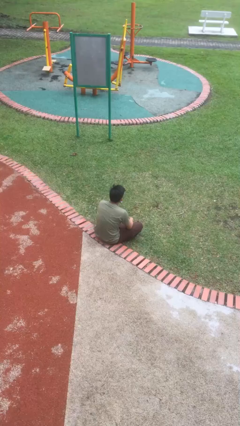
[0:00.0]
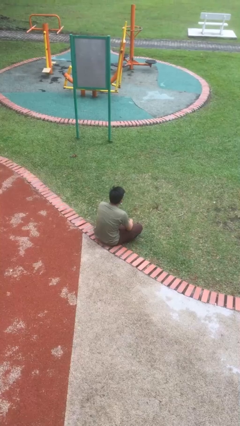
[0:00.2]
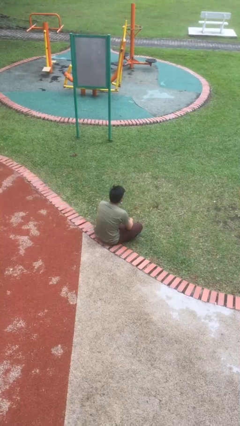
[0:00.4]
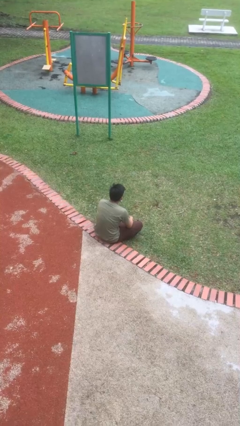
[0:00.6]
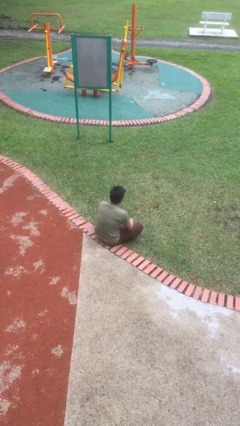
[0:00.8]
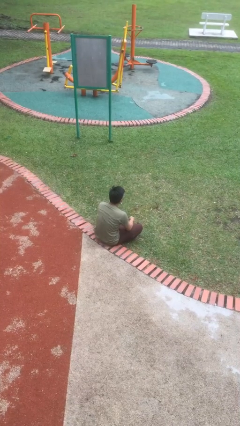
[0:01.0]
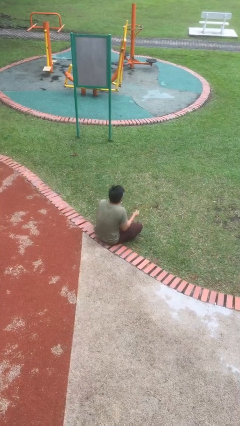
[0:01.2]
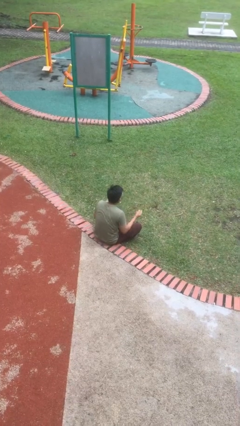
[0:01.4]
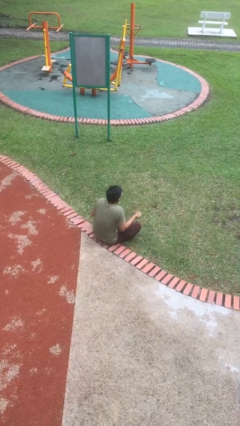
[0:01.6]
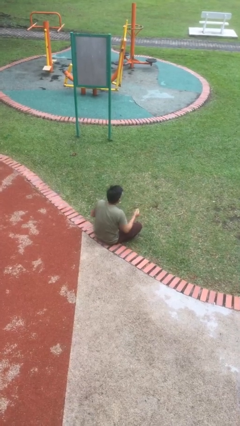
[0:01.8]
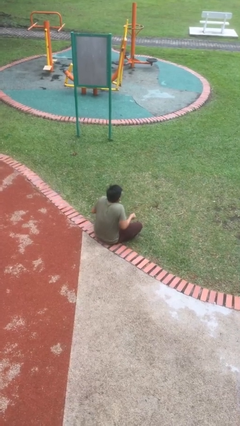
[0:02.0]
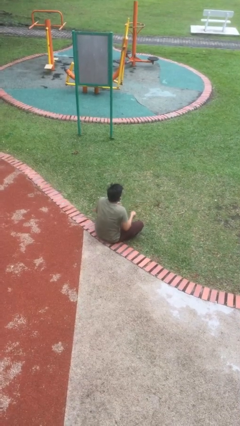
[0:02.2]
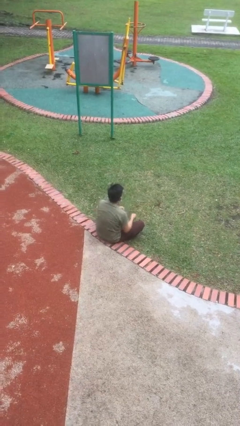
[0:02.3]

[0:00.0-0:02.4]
person shrugs

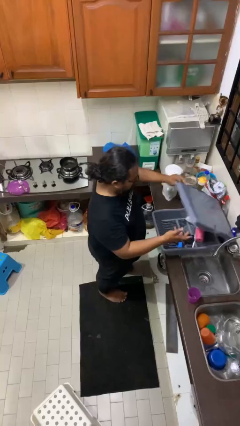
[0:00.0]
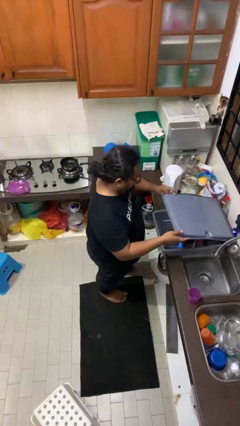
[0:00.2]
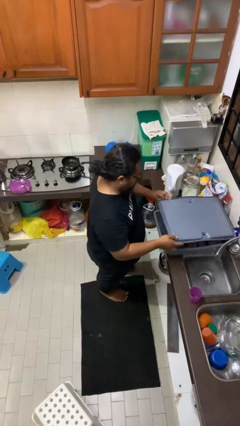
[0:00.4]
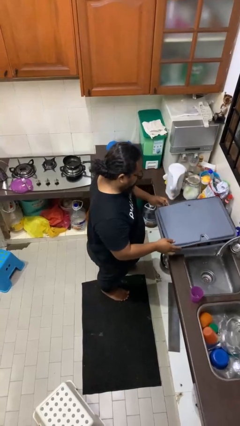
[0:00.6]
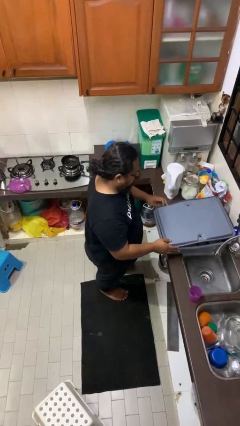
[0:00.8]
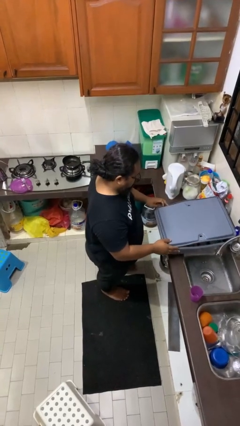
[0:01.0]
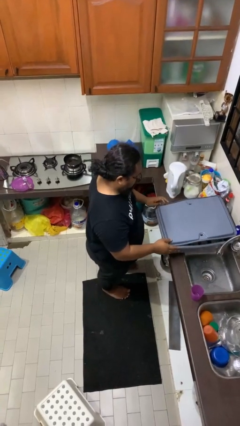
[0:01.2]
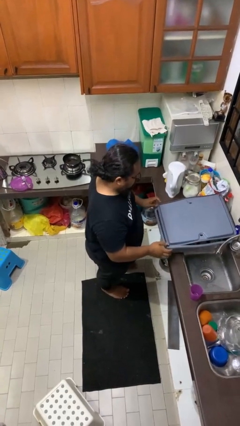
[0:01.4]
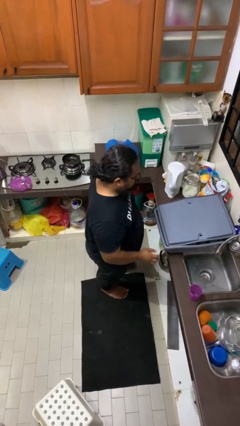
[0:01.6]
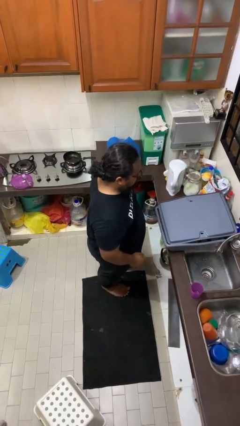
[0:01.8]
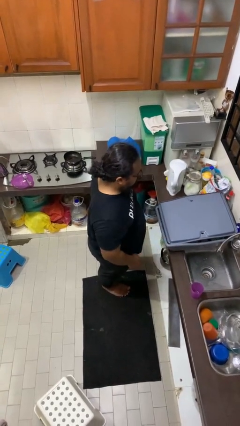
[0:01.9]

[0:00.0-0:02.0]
person closes dishwasher

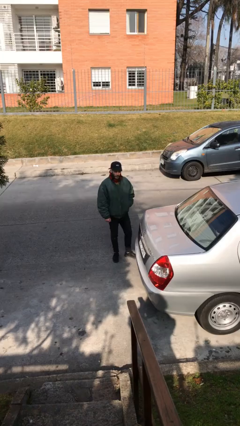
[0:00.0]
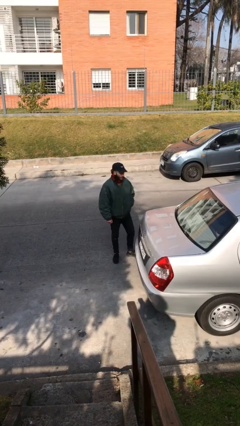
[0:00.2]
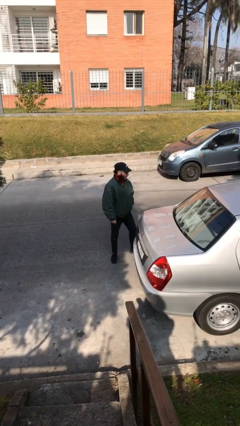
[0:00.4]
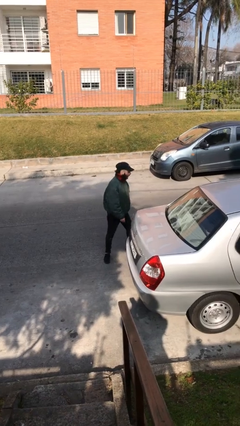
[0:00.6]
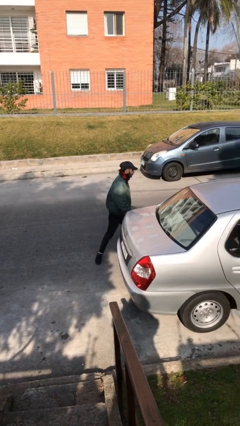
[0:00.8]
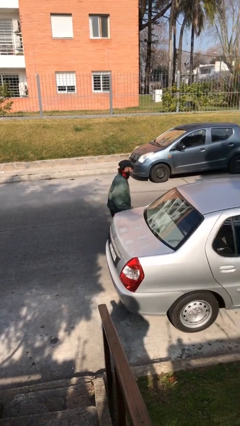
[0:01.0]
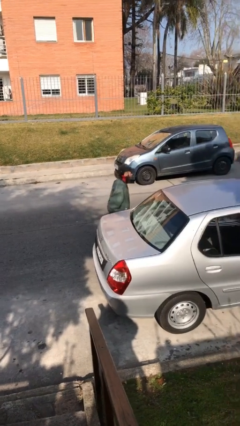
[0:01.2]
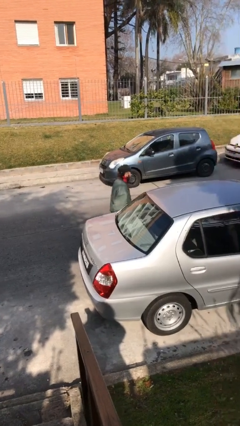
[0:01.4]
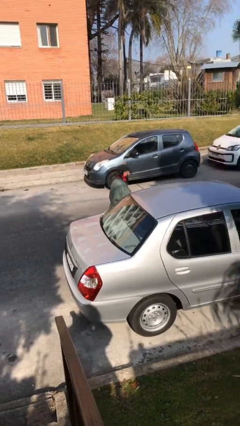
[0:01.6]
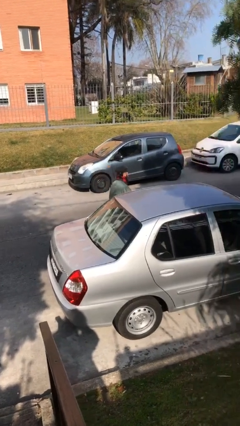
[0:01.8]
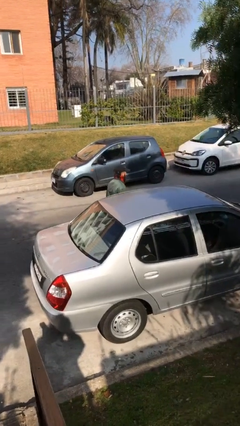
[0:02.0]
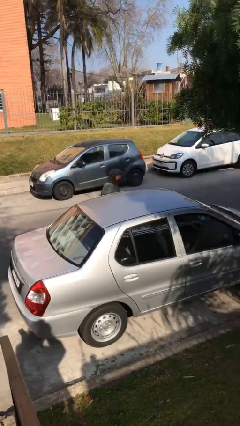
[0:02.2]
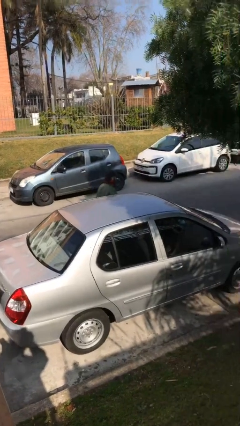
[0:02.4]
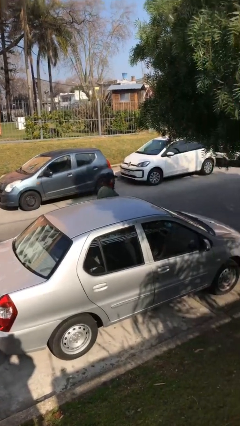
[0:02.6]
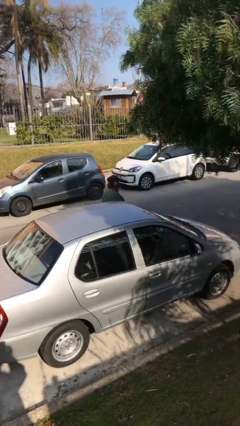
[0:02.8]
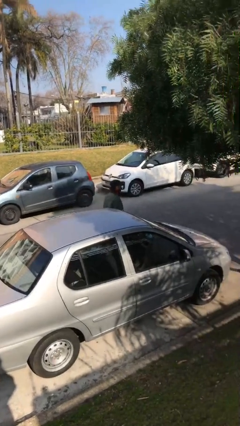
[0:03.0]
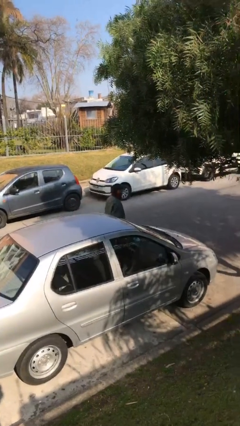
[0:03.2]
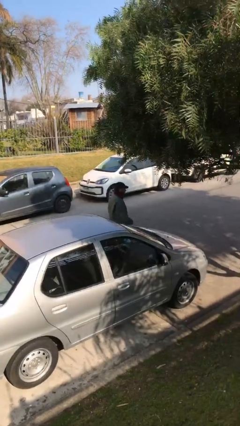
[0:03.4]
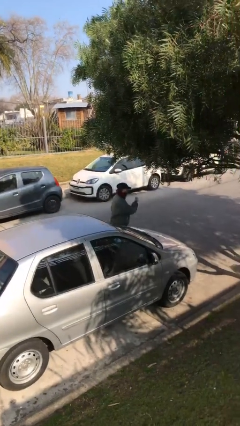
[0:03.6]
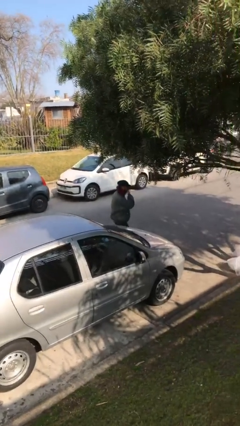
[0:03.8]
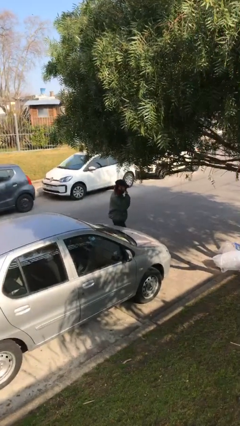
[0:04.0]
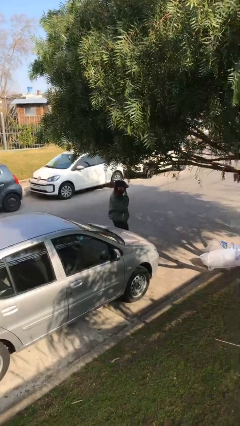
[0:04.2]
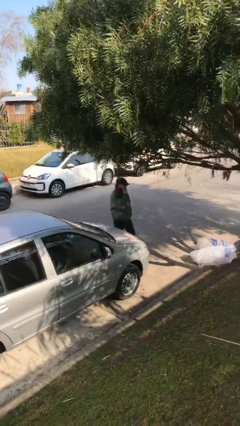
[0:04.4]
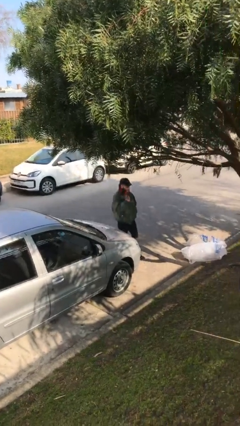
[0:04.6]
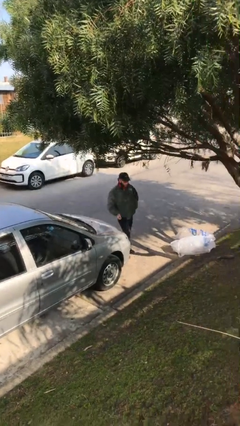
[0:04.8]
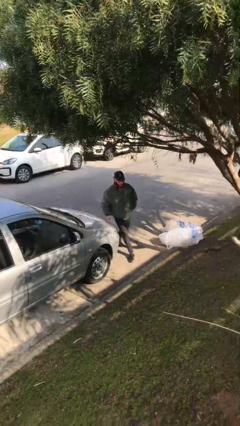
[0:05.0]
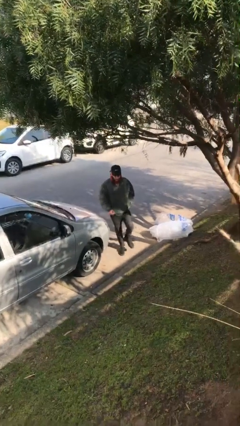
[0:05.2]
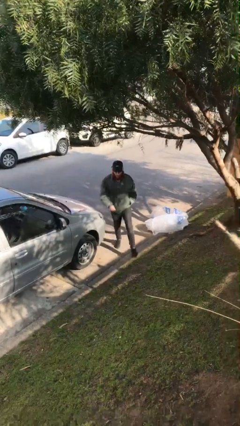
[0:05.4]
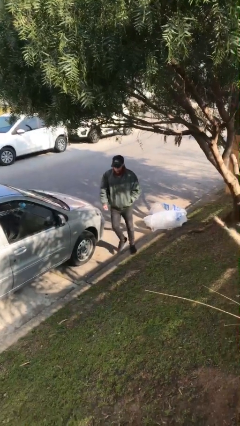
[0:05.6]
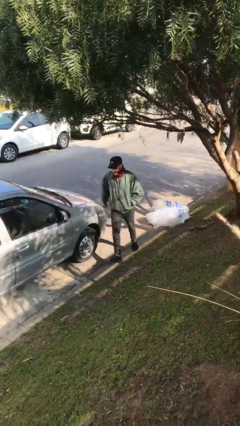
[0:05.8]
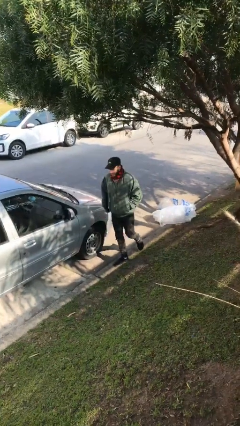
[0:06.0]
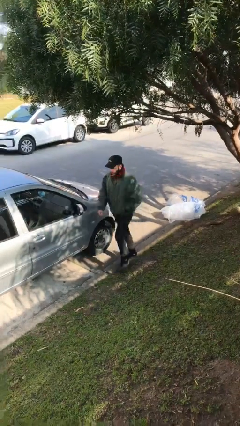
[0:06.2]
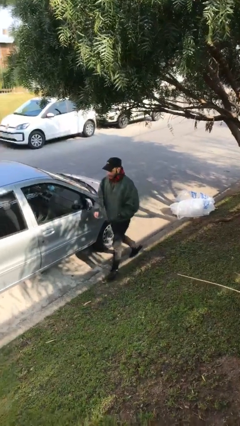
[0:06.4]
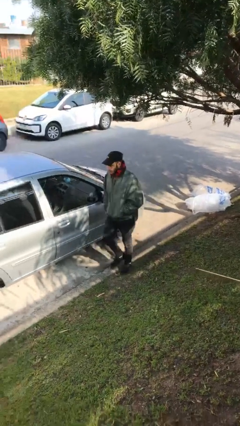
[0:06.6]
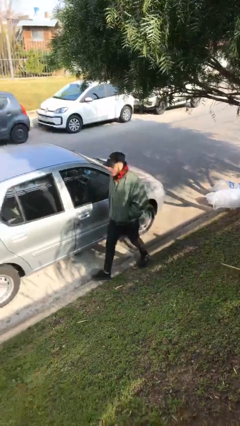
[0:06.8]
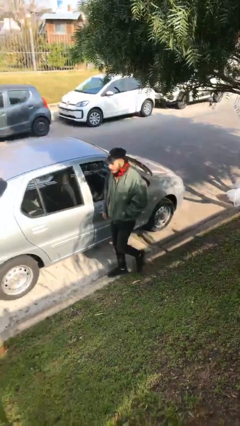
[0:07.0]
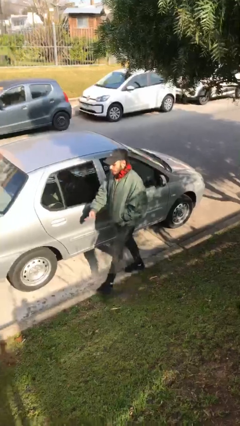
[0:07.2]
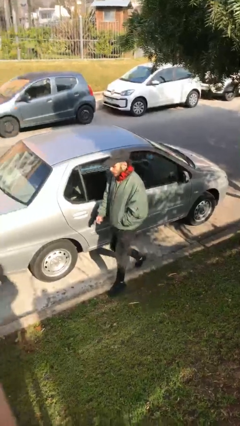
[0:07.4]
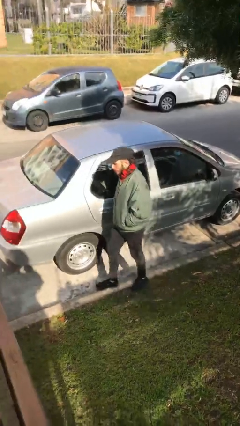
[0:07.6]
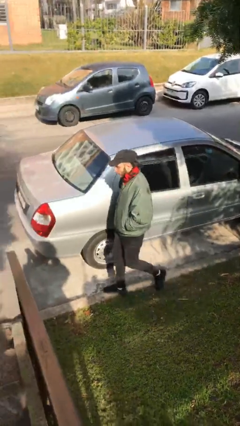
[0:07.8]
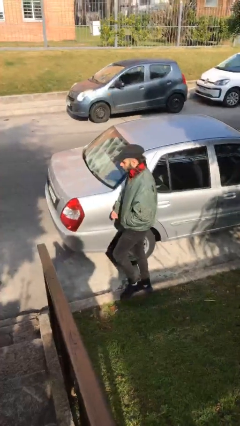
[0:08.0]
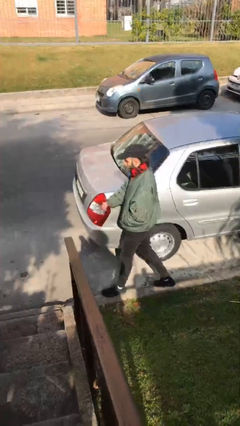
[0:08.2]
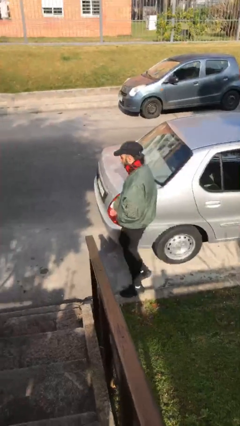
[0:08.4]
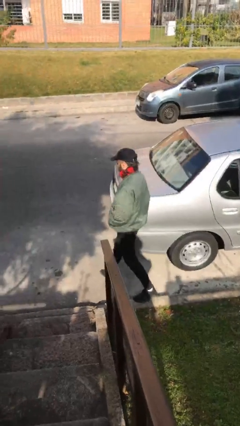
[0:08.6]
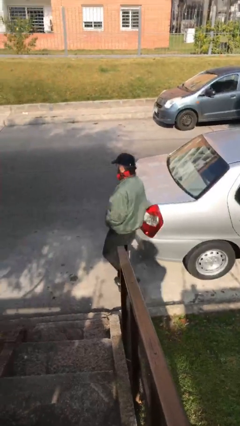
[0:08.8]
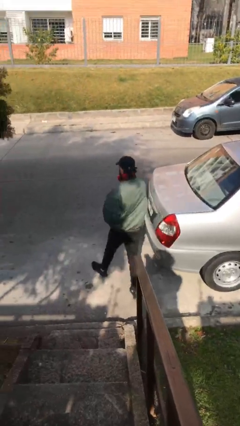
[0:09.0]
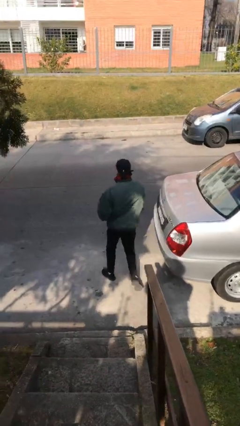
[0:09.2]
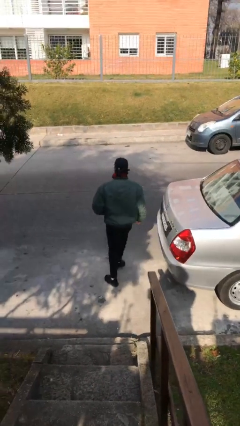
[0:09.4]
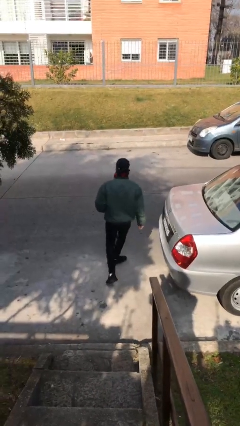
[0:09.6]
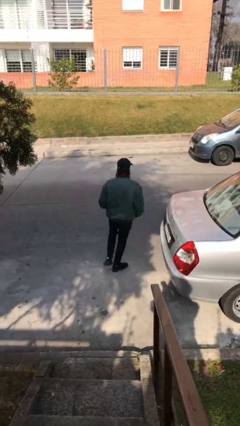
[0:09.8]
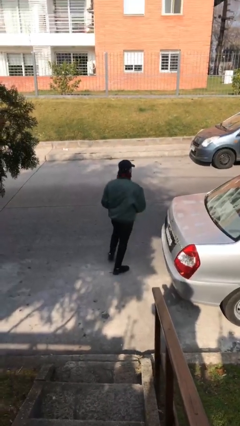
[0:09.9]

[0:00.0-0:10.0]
person walks around car

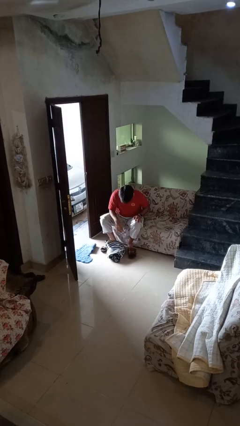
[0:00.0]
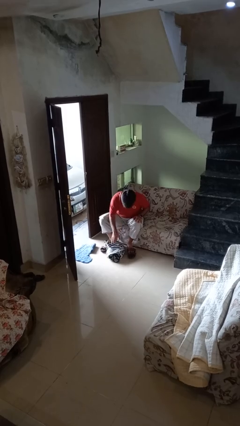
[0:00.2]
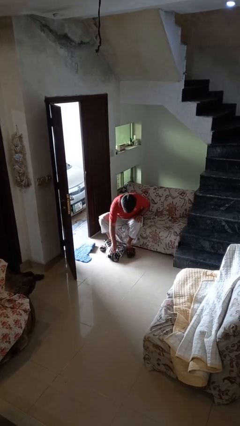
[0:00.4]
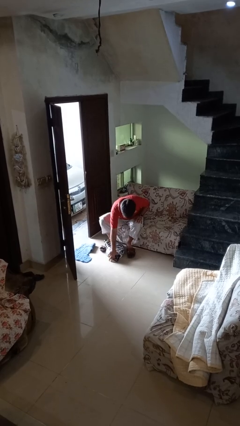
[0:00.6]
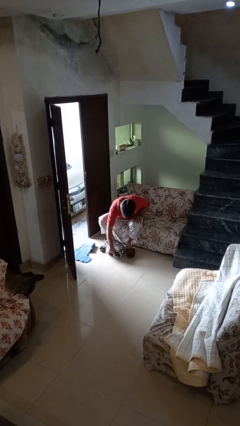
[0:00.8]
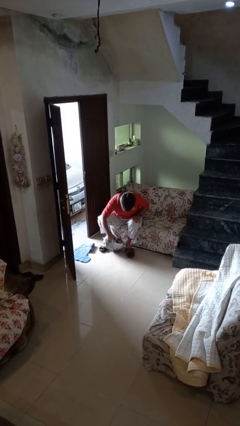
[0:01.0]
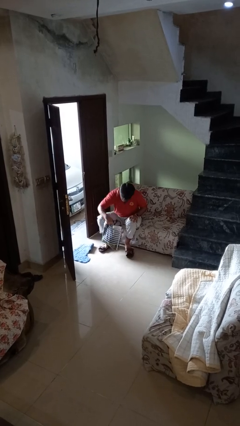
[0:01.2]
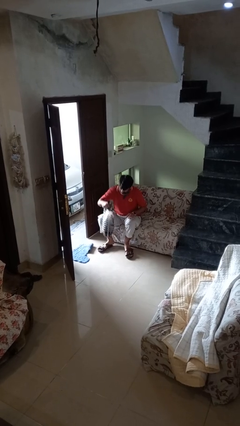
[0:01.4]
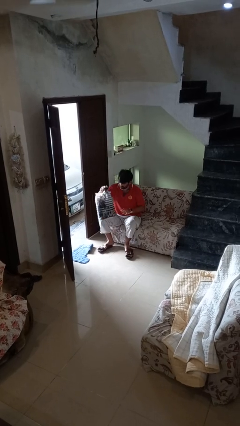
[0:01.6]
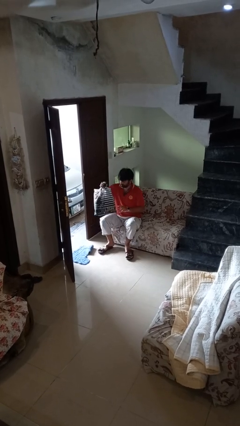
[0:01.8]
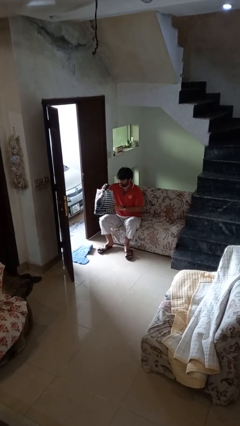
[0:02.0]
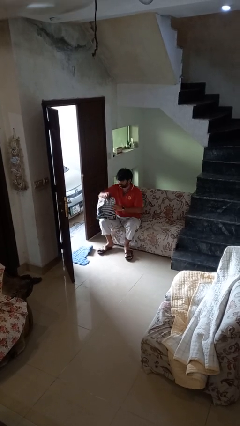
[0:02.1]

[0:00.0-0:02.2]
person picks up object from floor

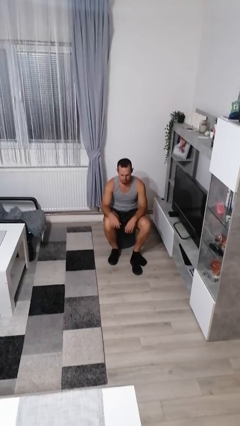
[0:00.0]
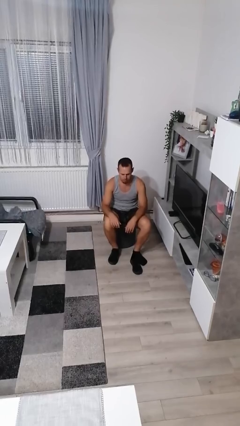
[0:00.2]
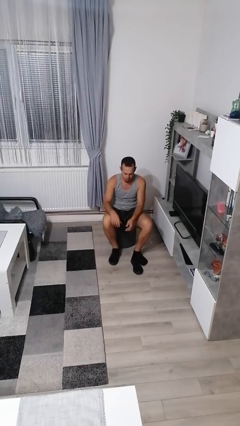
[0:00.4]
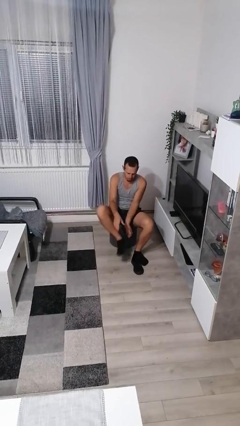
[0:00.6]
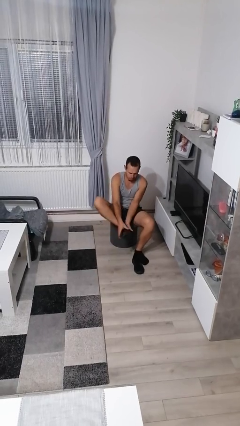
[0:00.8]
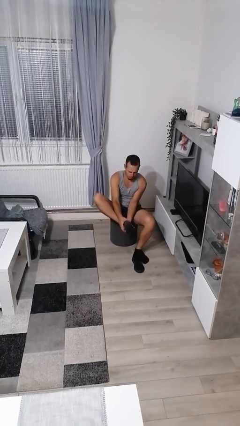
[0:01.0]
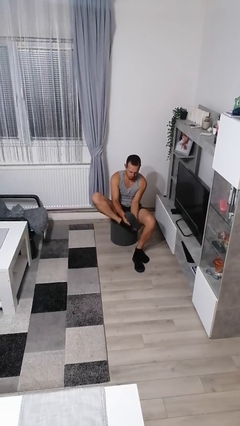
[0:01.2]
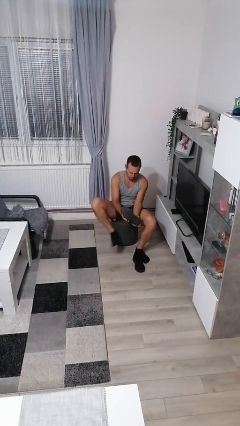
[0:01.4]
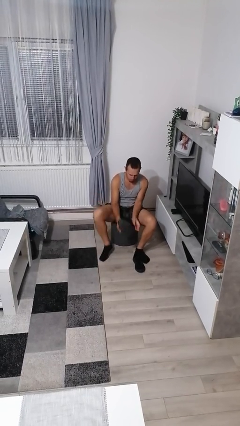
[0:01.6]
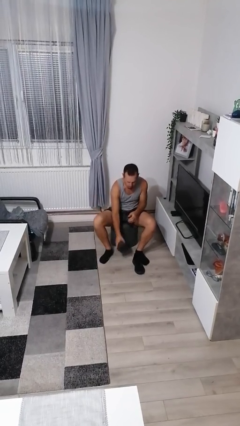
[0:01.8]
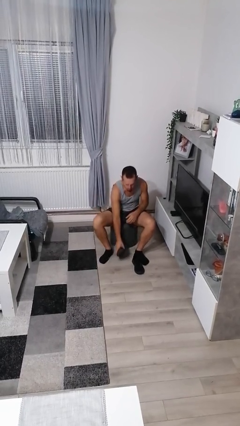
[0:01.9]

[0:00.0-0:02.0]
person takes off shoes
